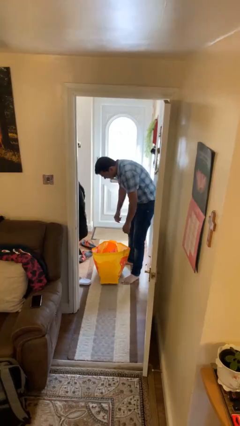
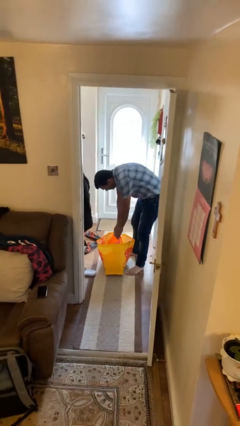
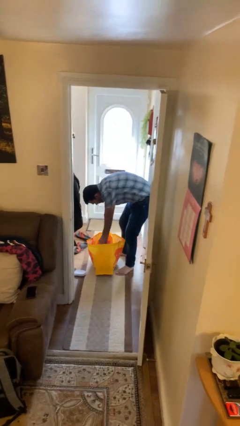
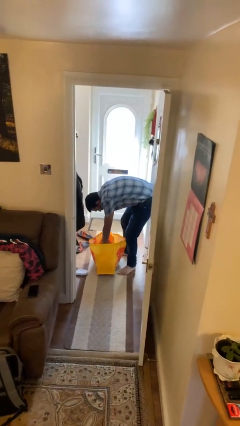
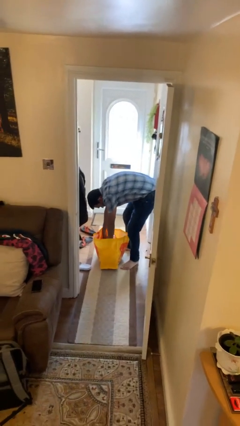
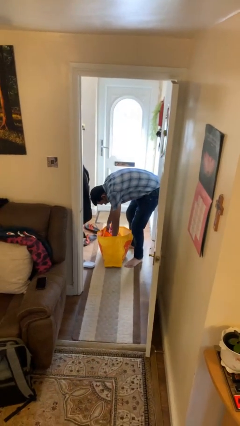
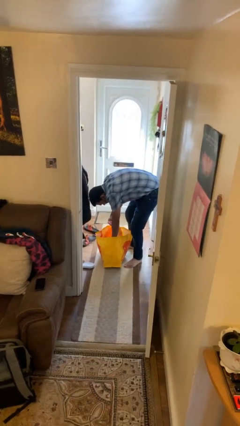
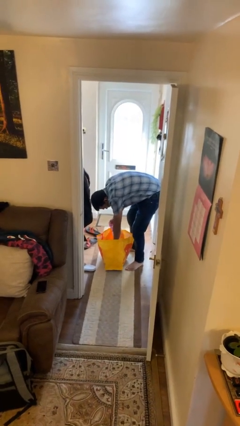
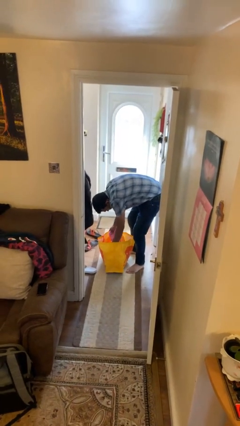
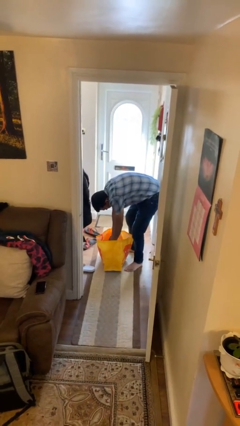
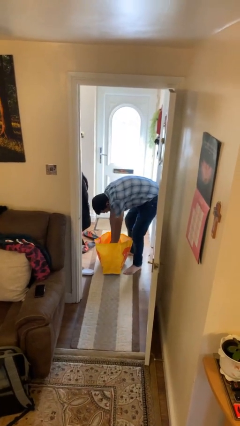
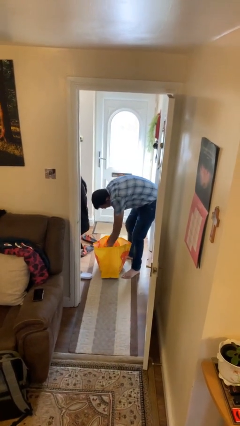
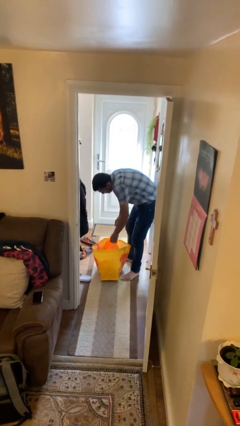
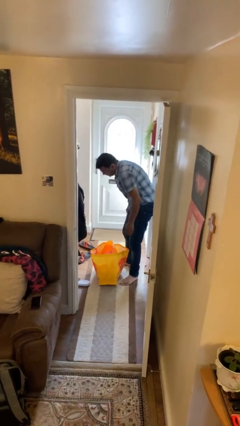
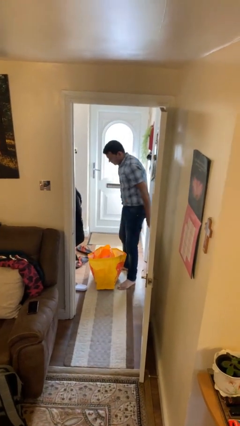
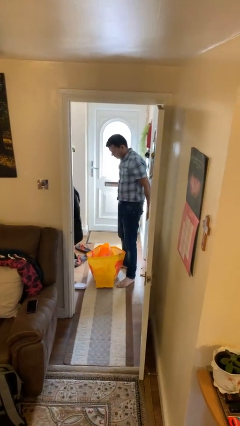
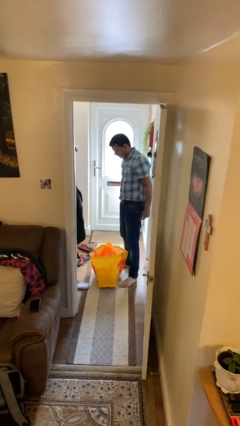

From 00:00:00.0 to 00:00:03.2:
person searches in bag

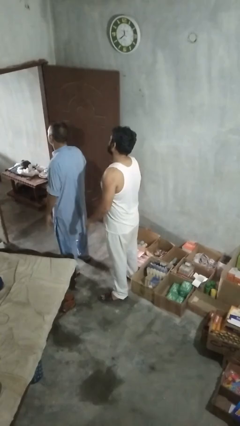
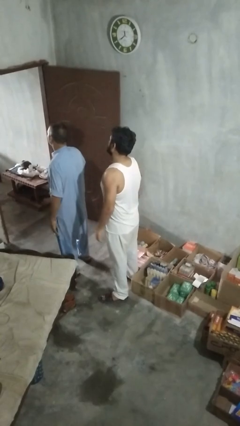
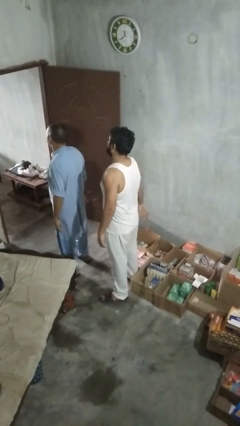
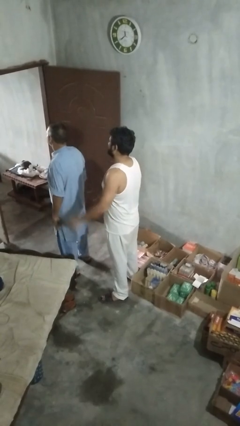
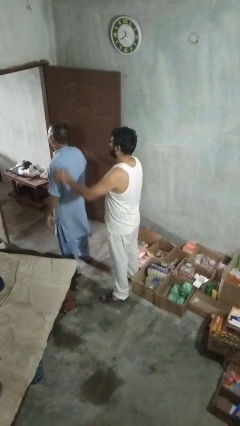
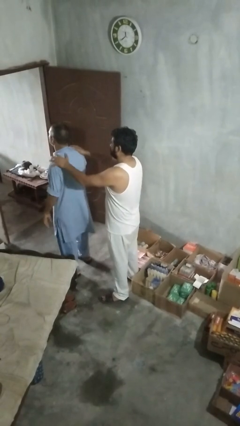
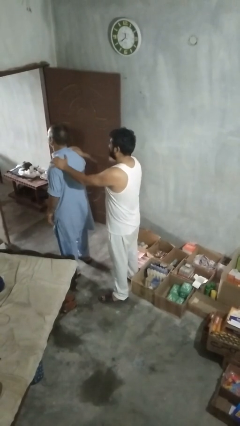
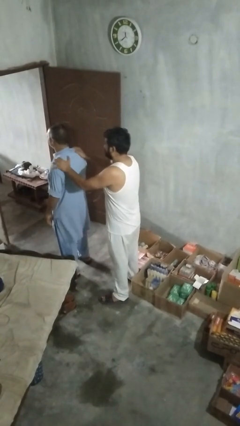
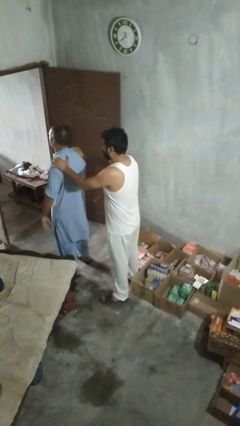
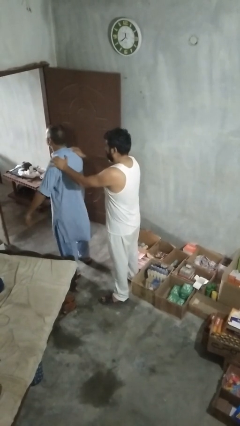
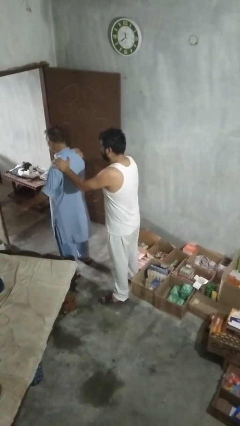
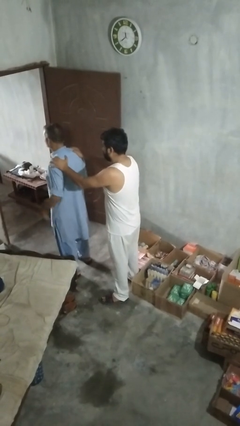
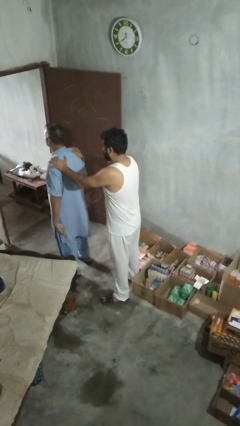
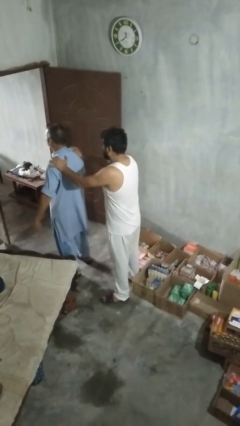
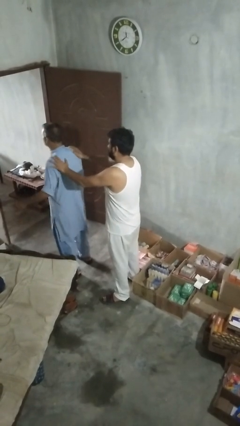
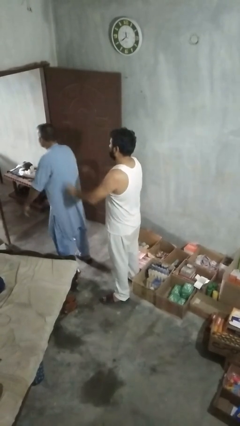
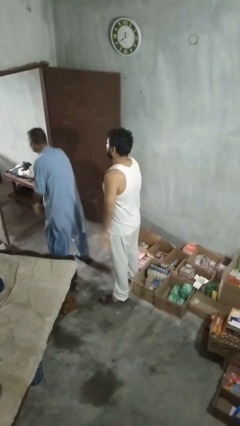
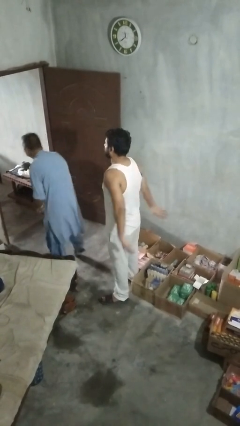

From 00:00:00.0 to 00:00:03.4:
person pounds shoulders of person

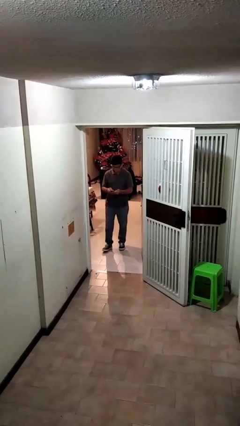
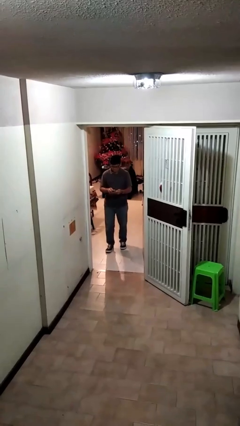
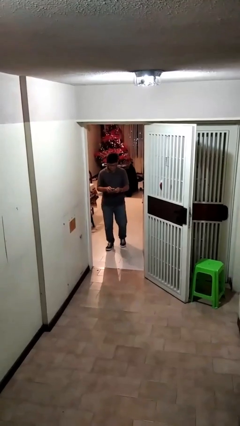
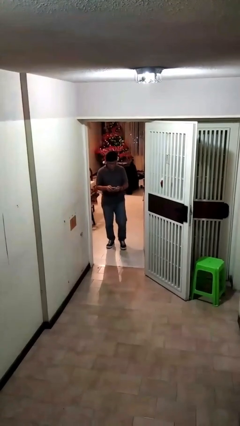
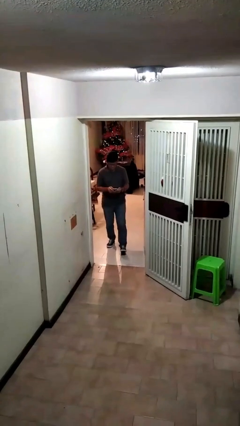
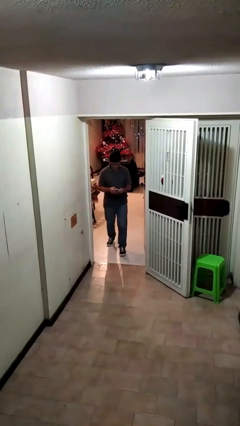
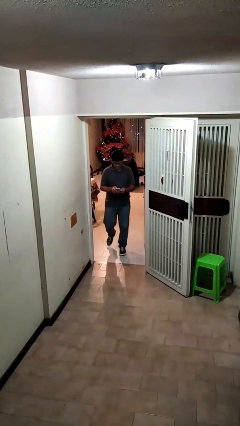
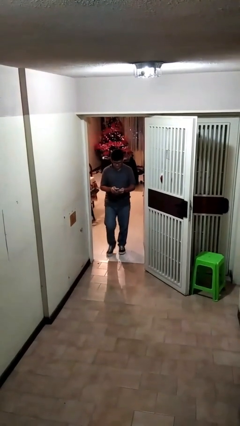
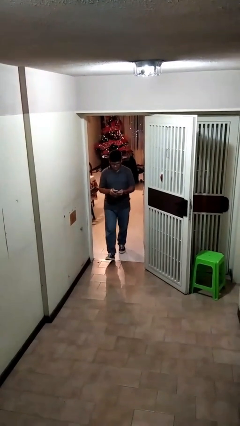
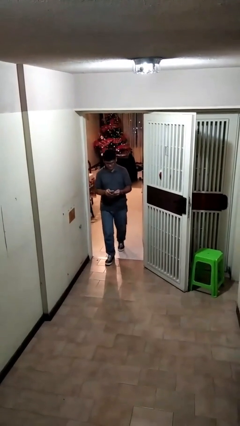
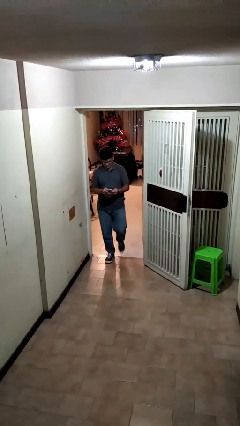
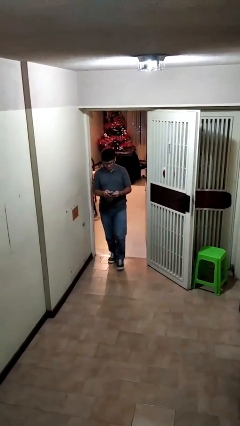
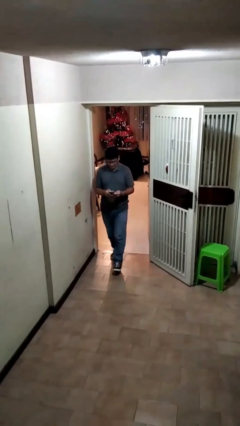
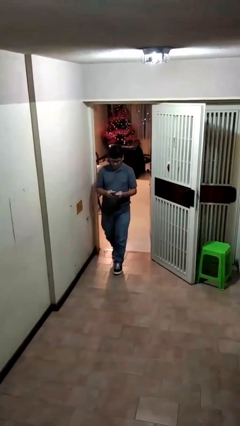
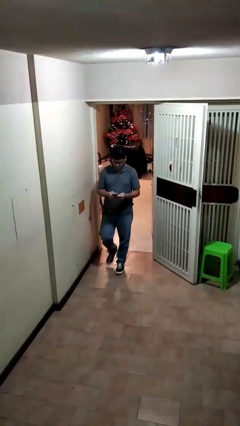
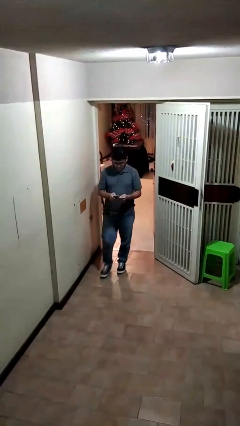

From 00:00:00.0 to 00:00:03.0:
person enters scene through structure

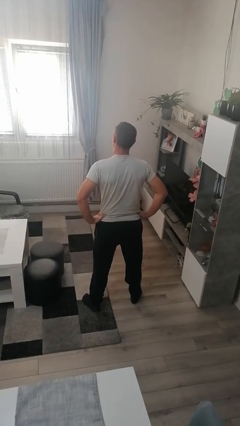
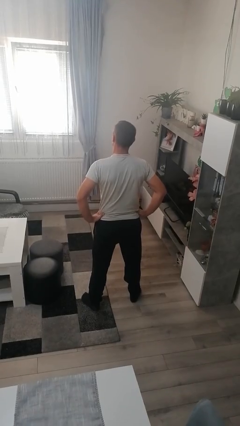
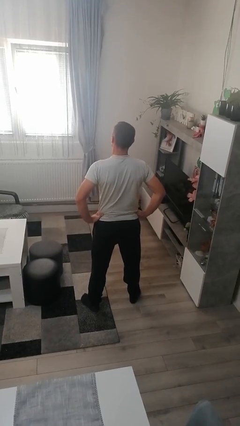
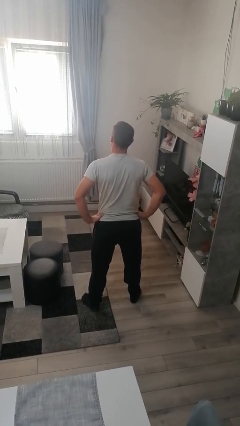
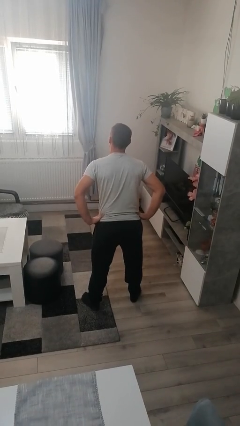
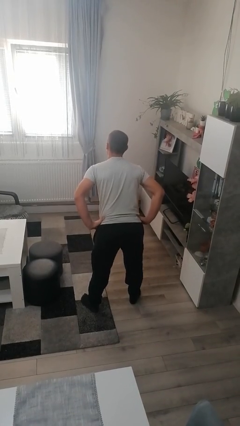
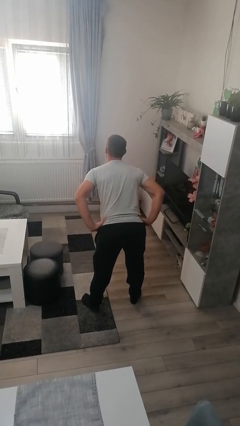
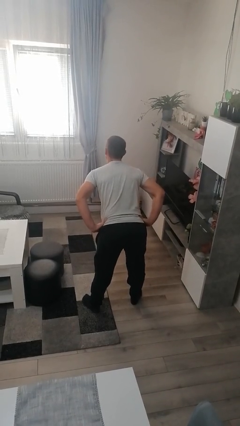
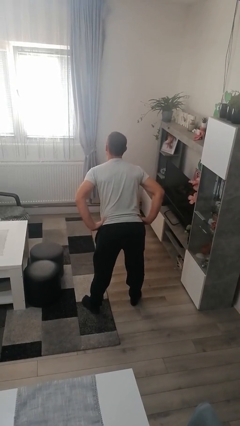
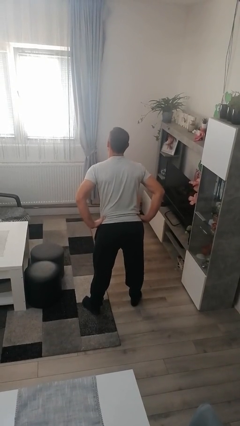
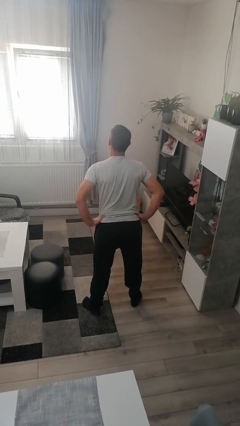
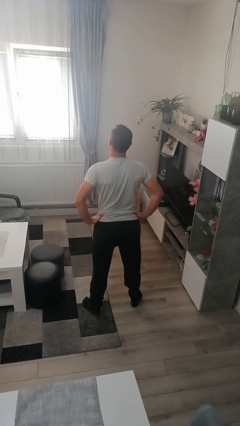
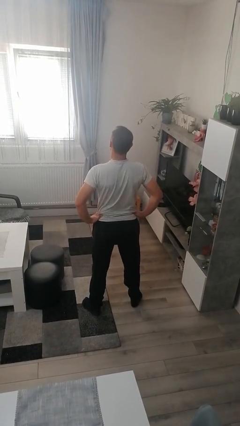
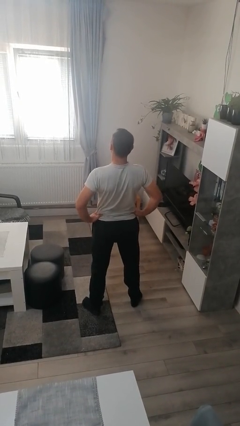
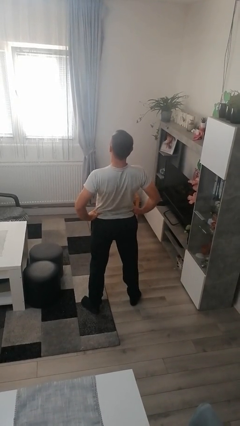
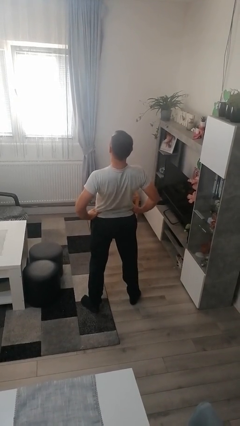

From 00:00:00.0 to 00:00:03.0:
person wiggles hips

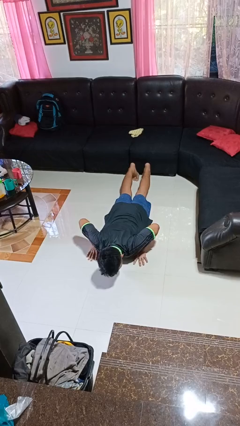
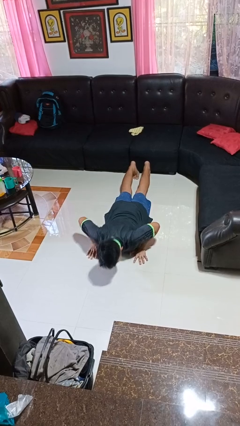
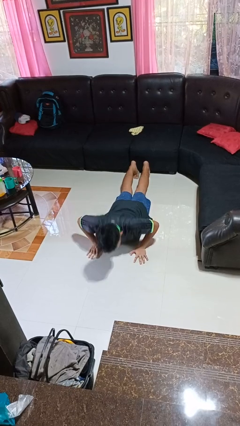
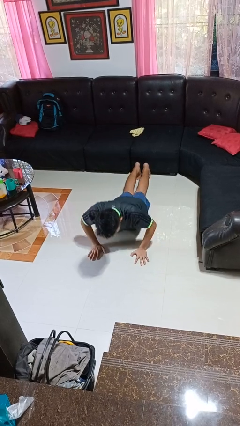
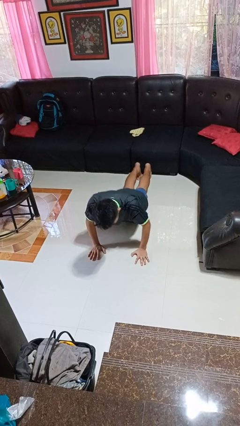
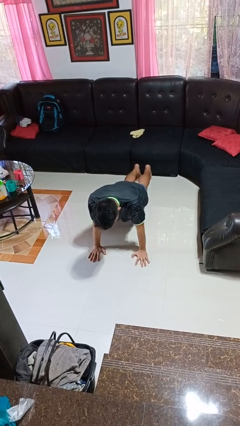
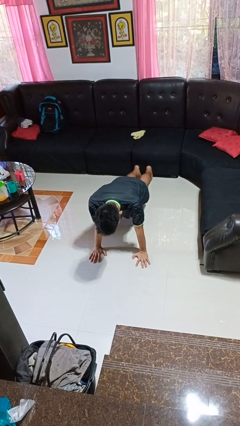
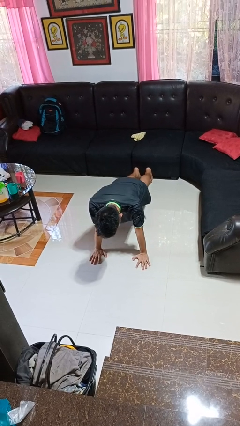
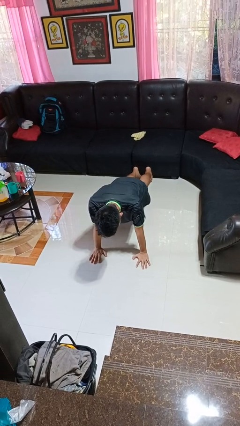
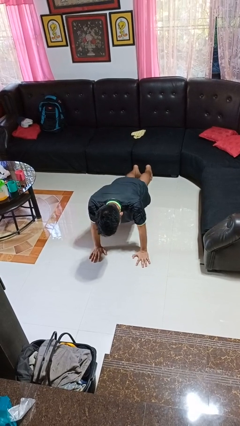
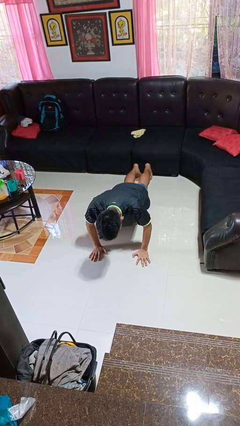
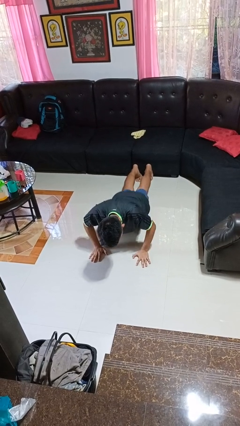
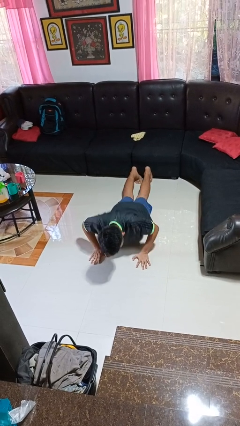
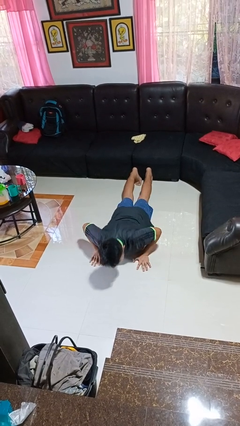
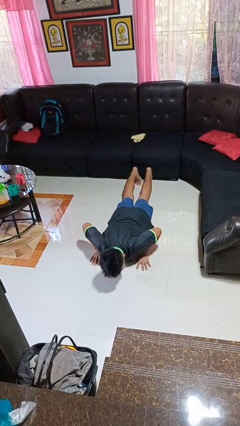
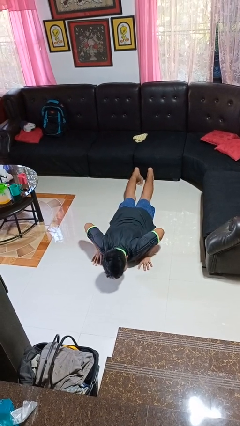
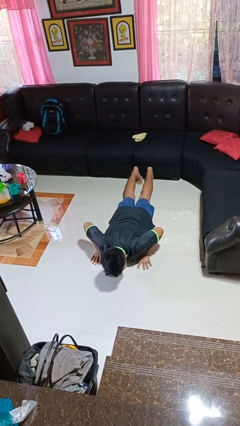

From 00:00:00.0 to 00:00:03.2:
person exercises with pushup

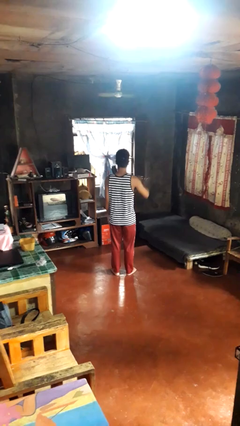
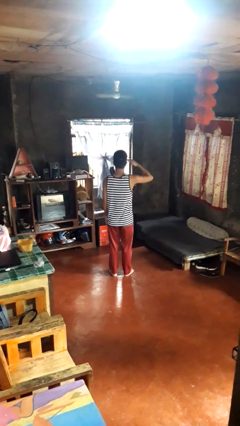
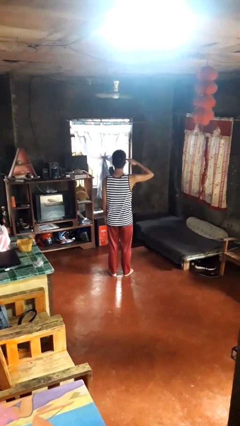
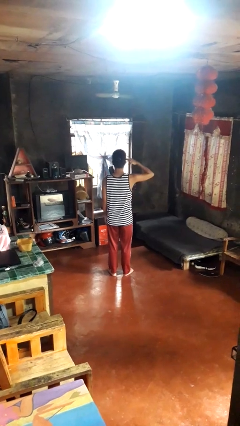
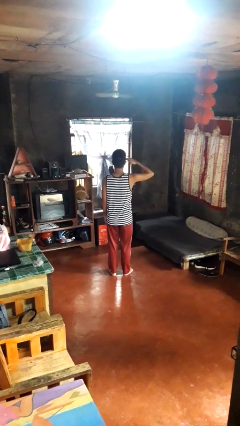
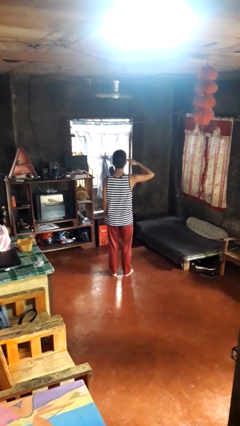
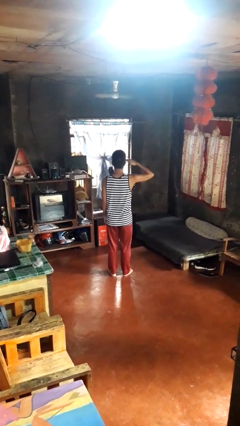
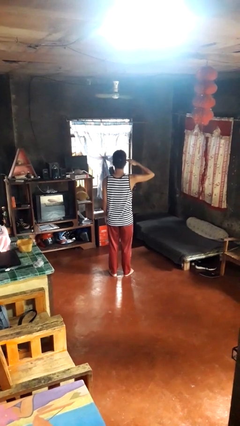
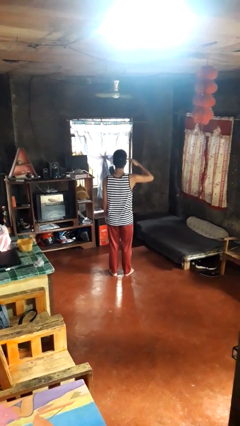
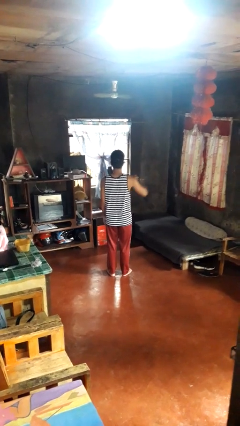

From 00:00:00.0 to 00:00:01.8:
person salutes
